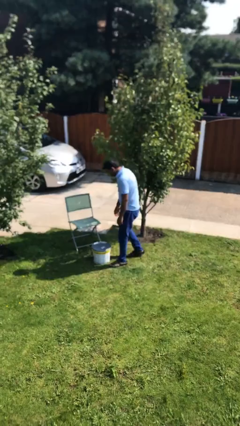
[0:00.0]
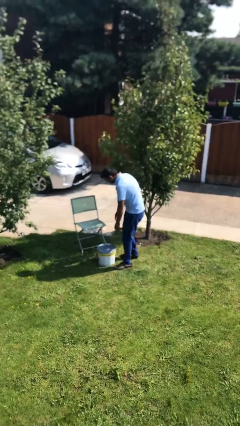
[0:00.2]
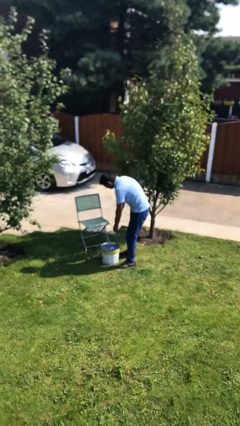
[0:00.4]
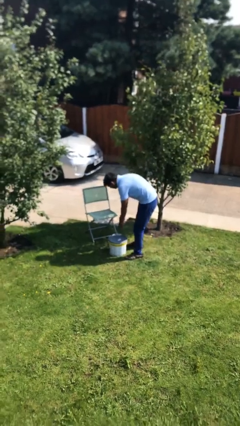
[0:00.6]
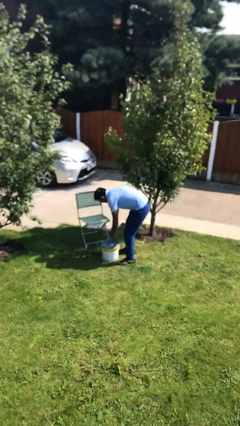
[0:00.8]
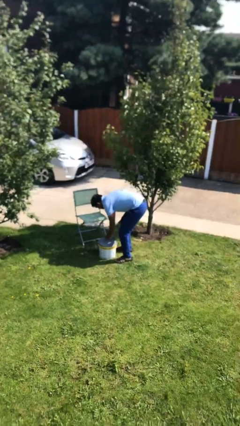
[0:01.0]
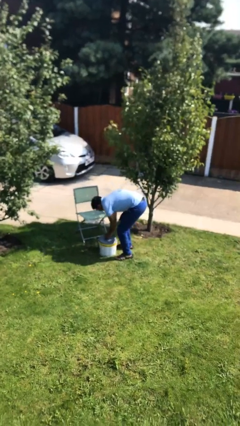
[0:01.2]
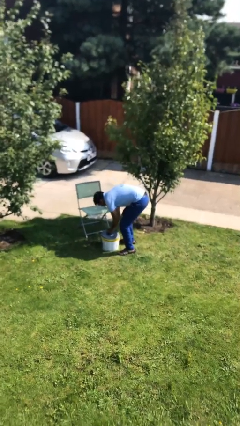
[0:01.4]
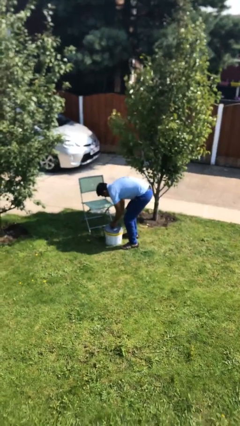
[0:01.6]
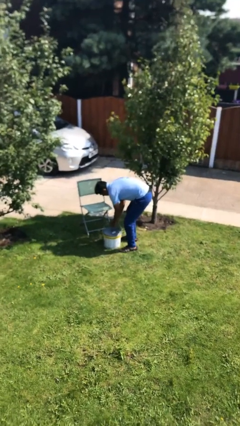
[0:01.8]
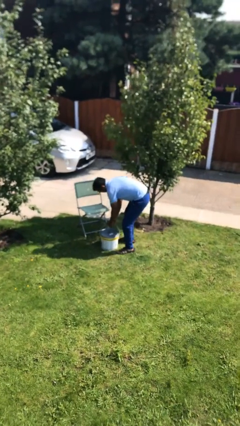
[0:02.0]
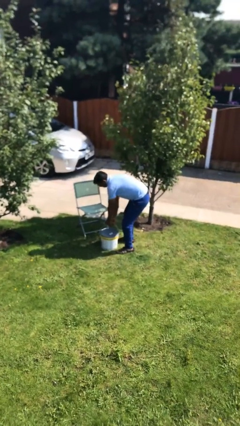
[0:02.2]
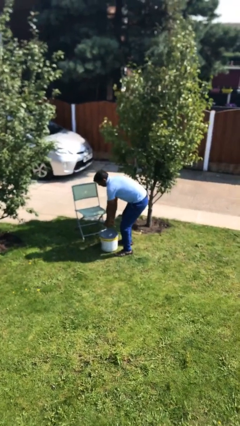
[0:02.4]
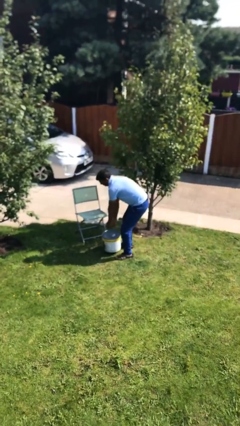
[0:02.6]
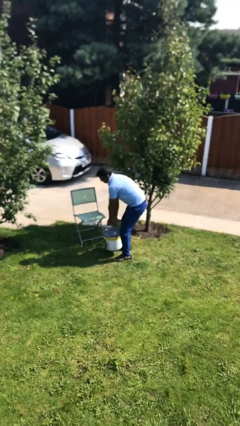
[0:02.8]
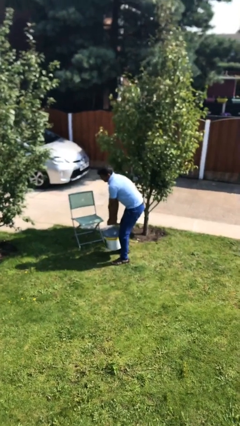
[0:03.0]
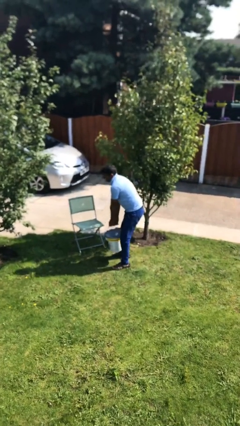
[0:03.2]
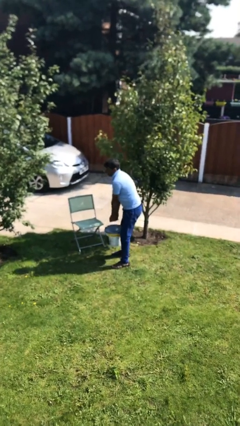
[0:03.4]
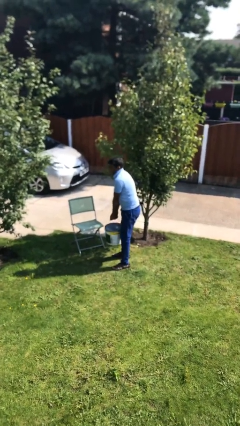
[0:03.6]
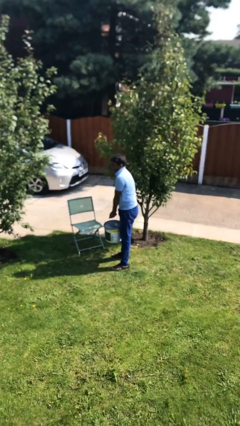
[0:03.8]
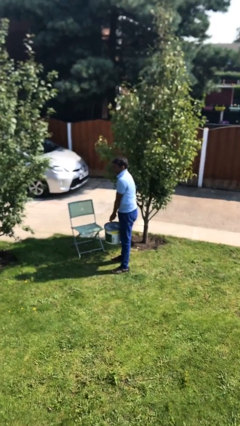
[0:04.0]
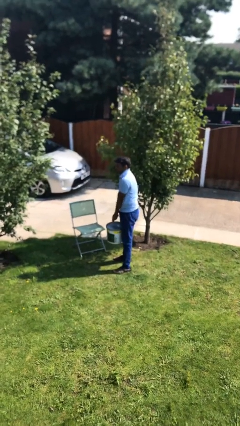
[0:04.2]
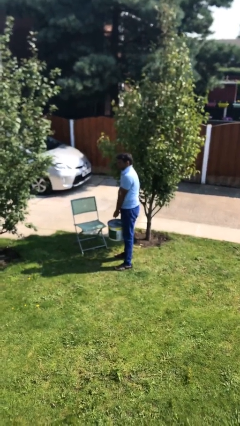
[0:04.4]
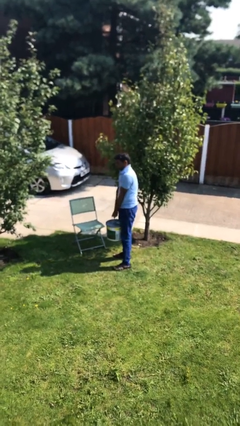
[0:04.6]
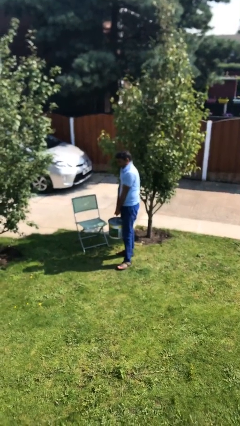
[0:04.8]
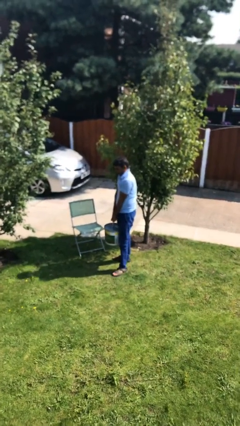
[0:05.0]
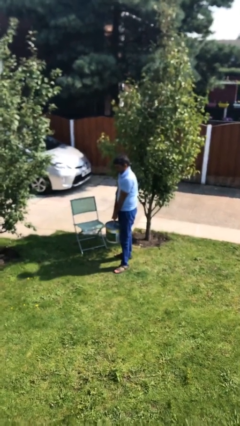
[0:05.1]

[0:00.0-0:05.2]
person picks up object from floor

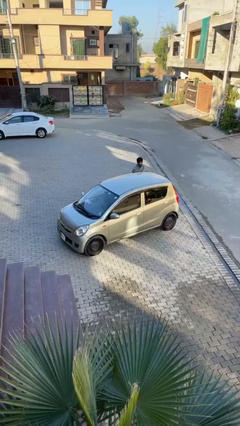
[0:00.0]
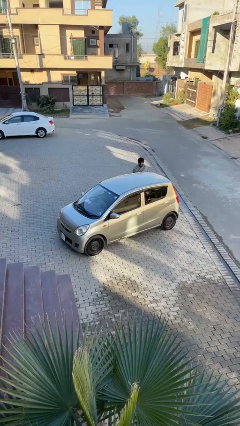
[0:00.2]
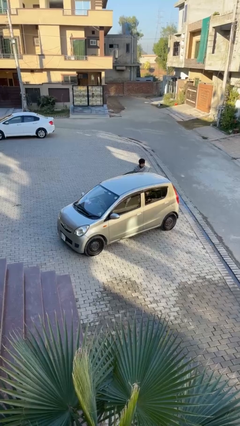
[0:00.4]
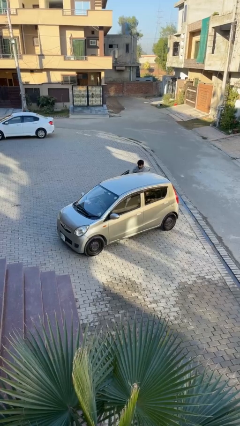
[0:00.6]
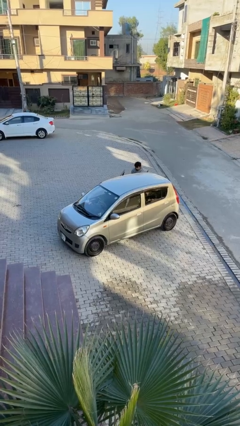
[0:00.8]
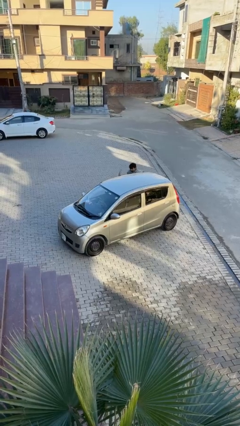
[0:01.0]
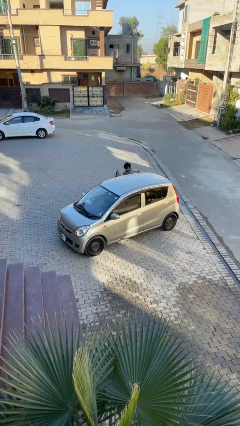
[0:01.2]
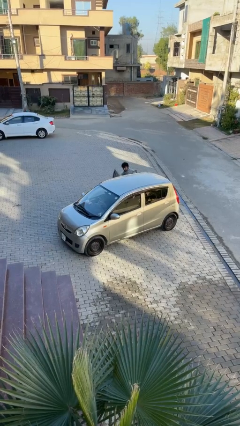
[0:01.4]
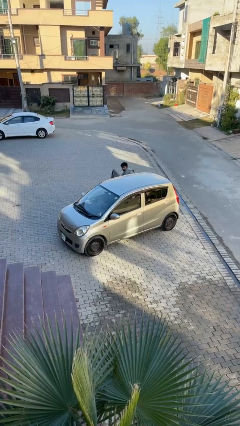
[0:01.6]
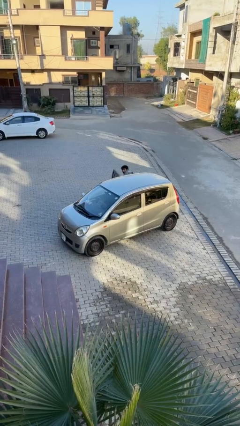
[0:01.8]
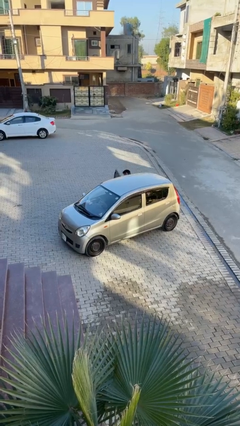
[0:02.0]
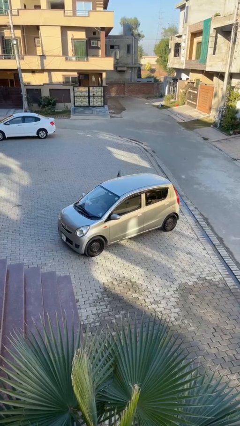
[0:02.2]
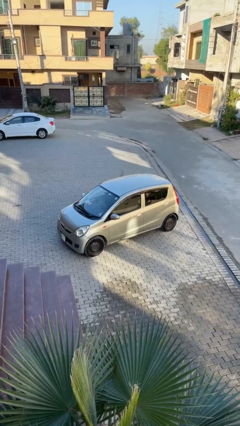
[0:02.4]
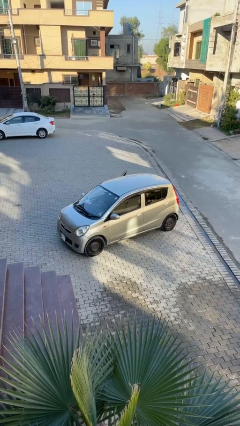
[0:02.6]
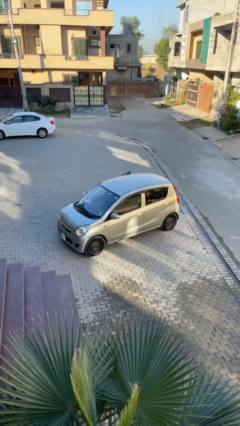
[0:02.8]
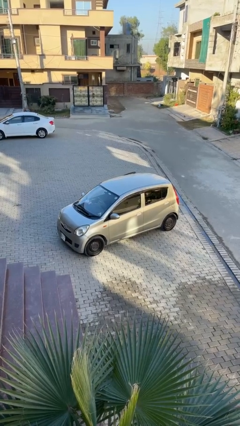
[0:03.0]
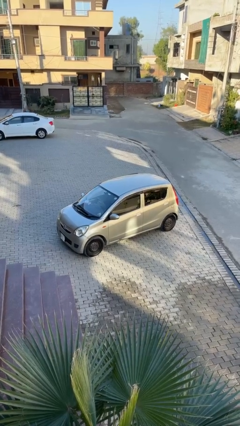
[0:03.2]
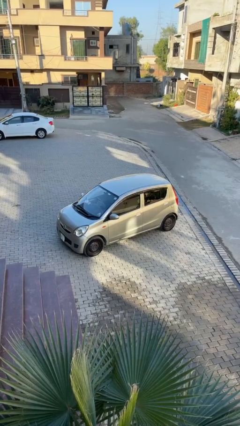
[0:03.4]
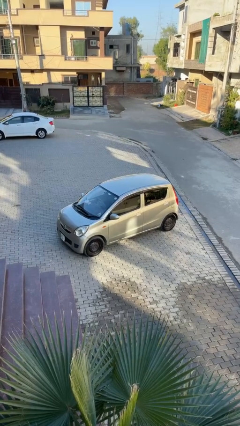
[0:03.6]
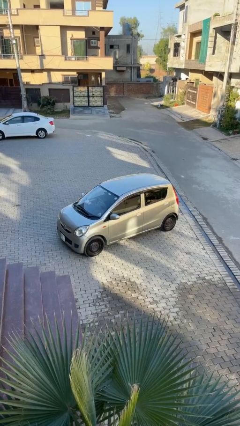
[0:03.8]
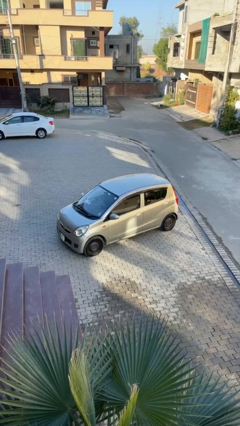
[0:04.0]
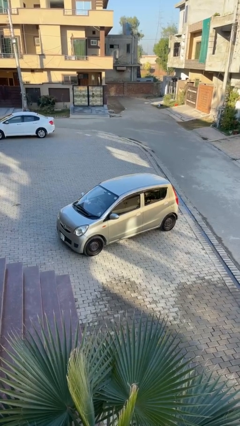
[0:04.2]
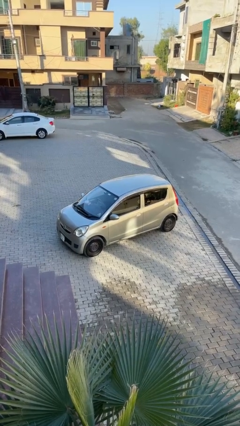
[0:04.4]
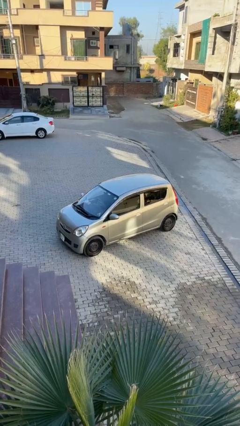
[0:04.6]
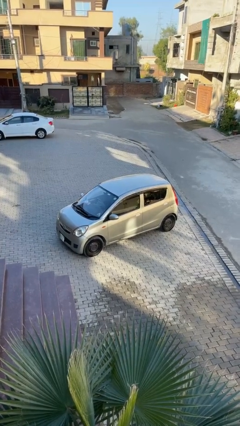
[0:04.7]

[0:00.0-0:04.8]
car picks up person

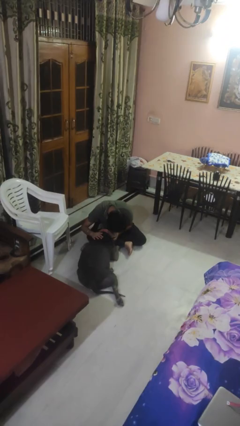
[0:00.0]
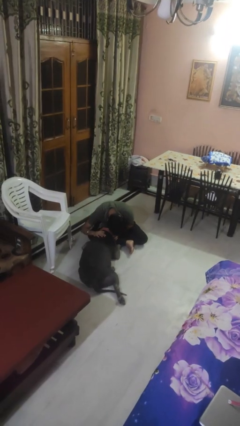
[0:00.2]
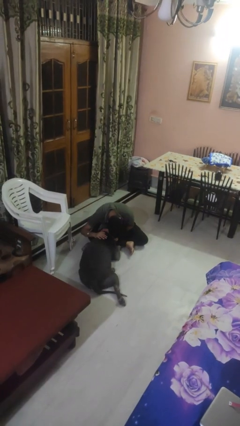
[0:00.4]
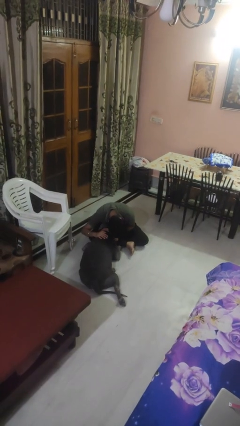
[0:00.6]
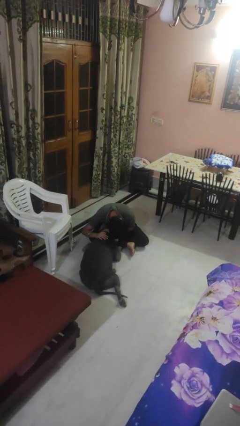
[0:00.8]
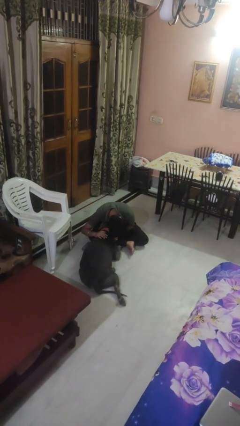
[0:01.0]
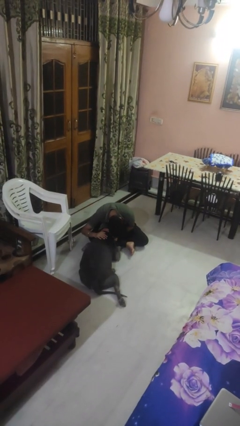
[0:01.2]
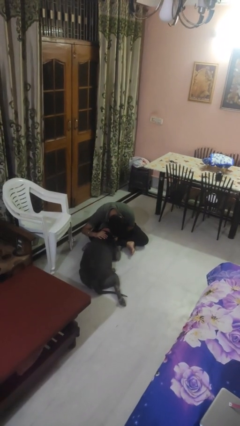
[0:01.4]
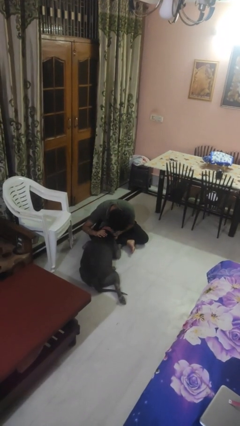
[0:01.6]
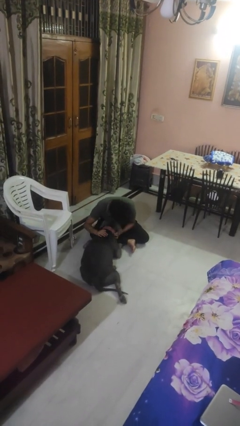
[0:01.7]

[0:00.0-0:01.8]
person hugs dog

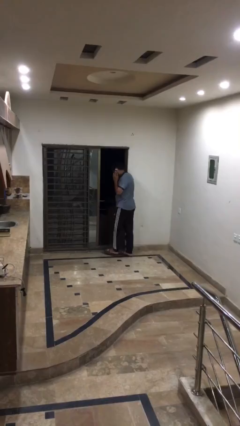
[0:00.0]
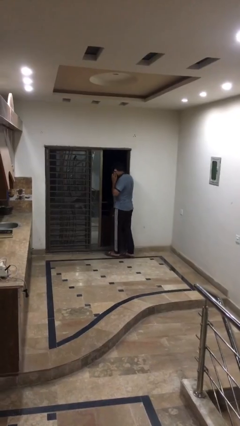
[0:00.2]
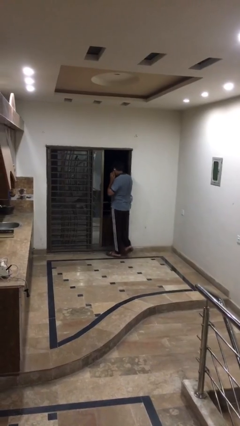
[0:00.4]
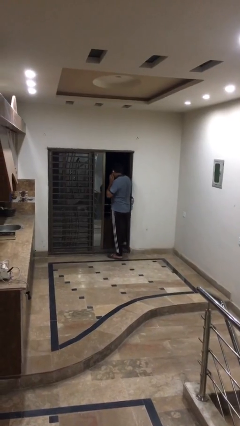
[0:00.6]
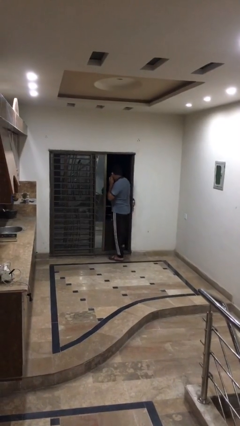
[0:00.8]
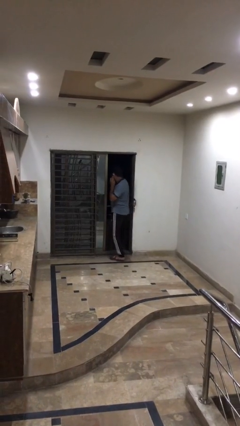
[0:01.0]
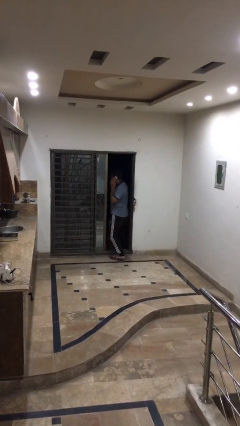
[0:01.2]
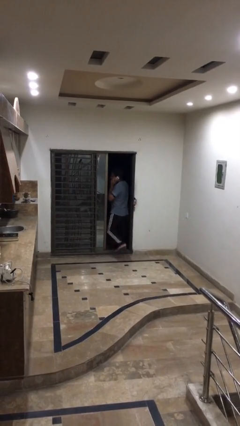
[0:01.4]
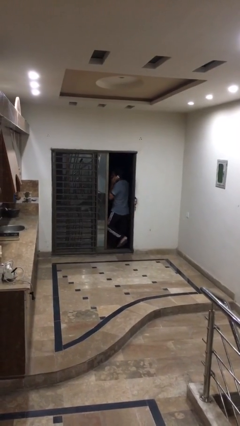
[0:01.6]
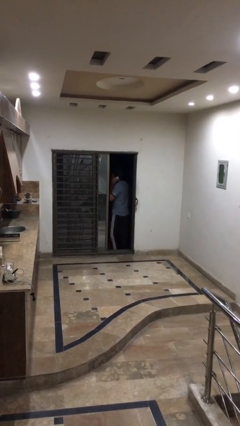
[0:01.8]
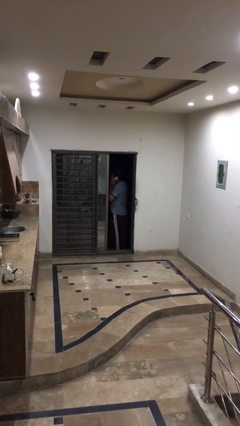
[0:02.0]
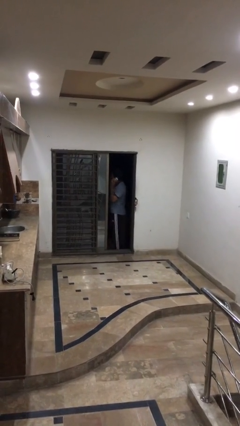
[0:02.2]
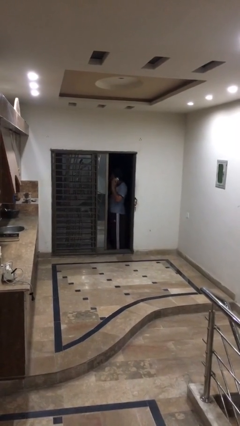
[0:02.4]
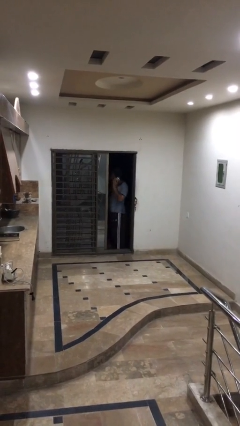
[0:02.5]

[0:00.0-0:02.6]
person exits scene through structure

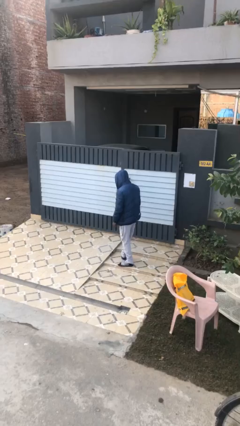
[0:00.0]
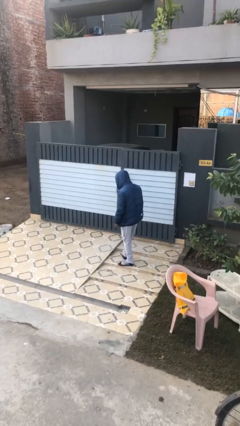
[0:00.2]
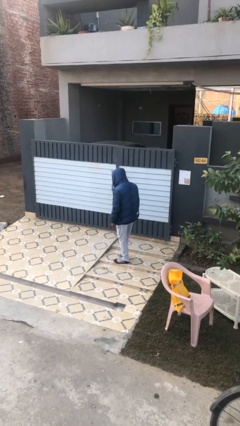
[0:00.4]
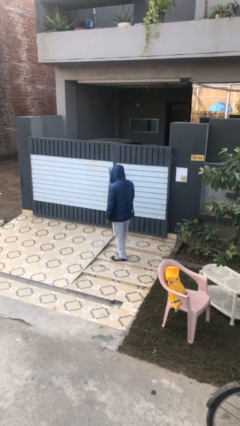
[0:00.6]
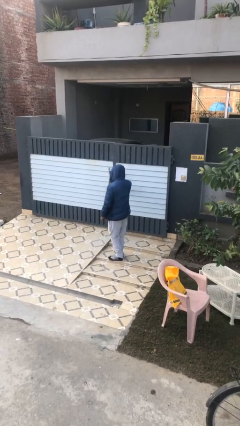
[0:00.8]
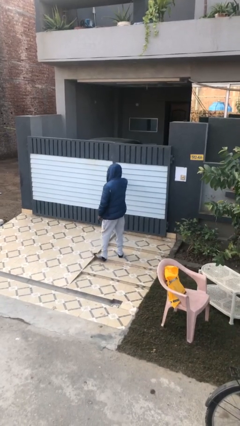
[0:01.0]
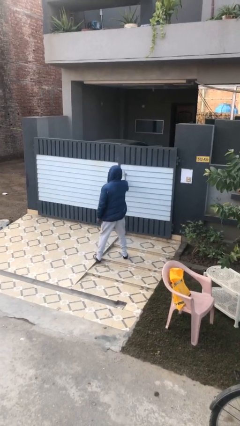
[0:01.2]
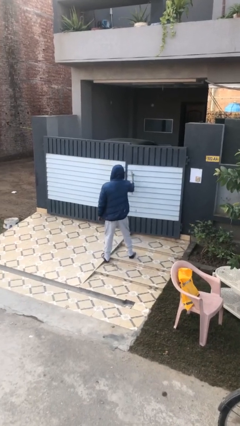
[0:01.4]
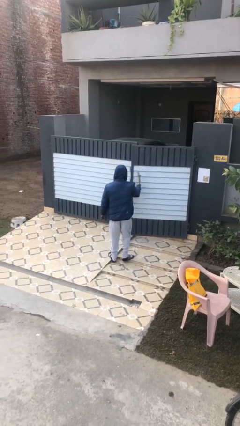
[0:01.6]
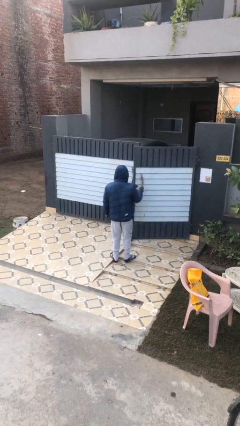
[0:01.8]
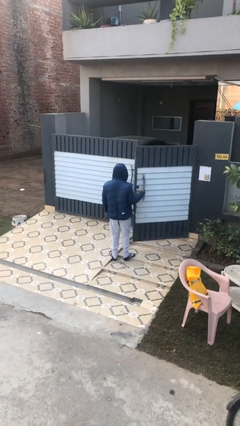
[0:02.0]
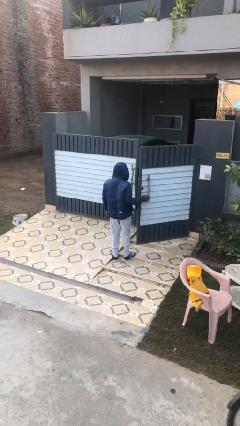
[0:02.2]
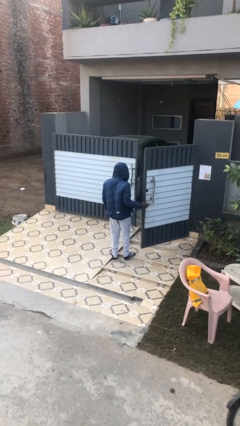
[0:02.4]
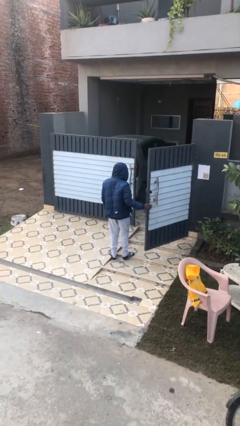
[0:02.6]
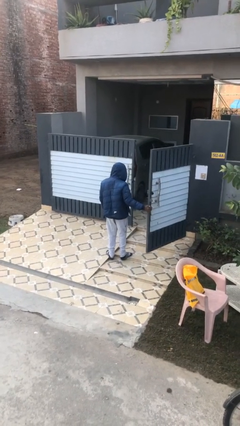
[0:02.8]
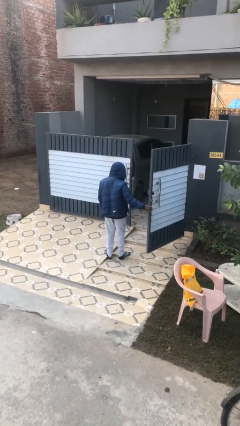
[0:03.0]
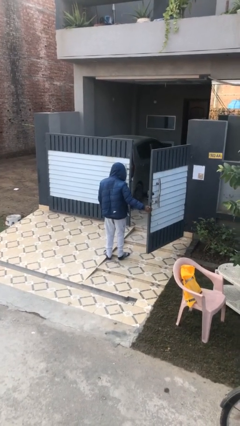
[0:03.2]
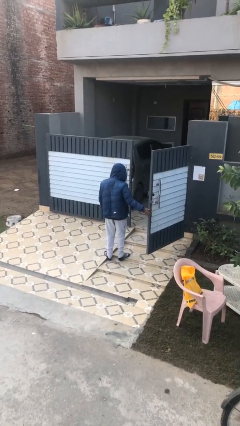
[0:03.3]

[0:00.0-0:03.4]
person opens facility door
